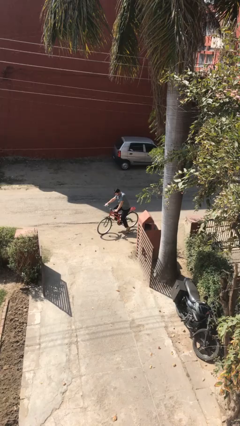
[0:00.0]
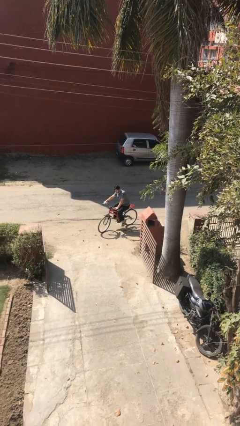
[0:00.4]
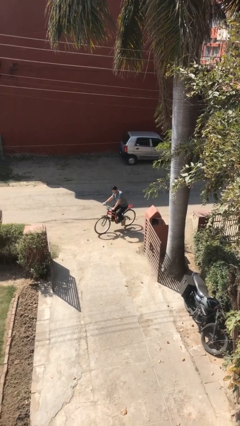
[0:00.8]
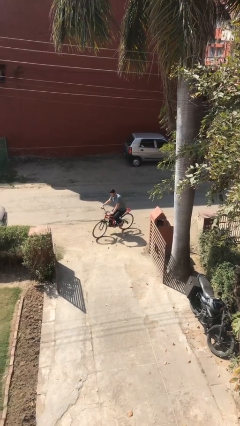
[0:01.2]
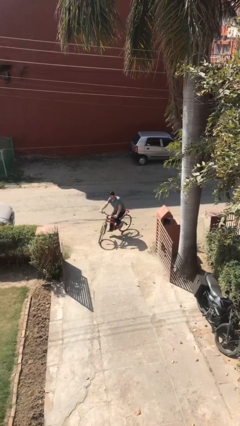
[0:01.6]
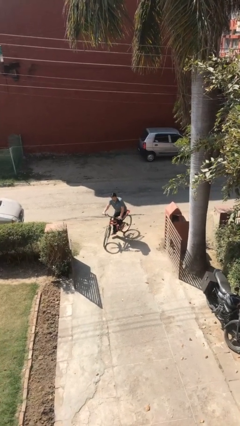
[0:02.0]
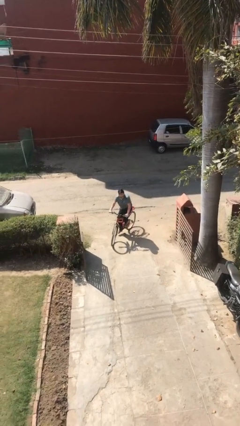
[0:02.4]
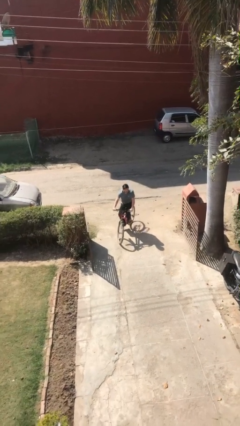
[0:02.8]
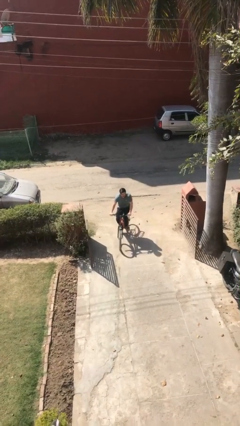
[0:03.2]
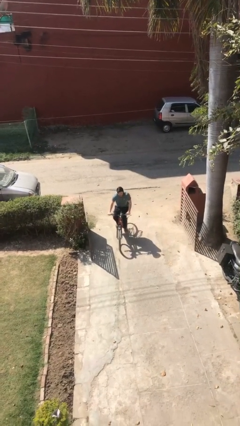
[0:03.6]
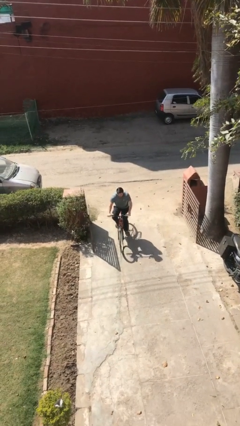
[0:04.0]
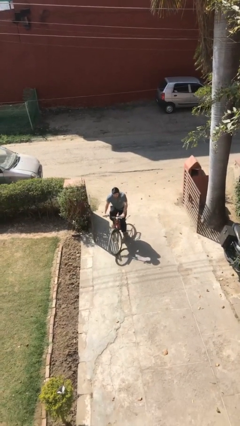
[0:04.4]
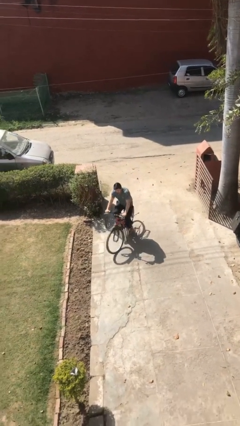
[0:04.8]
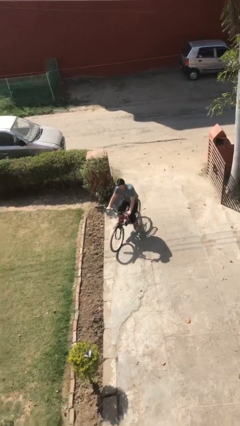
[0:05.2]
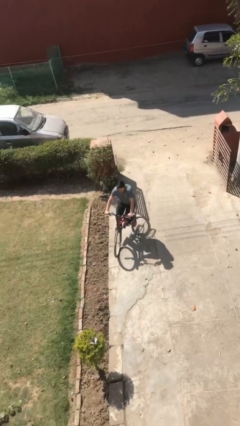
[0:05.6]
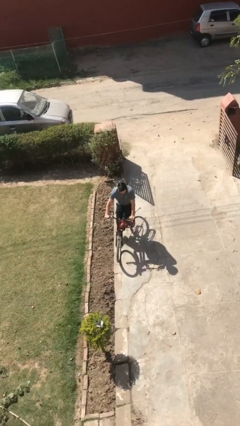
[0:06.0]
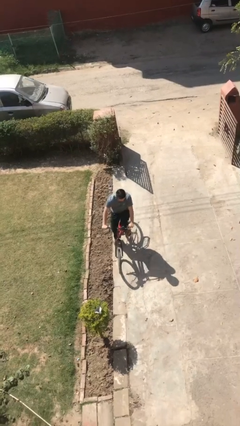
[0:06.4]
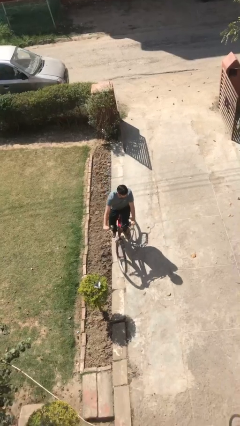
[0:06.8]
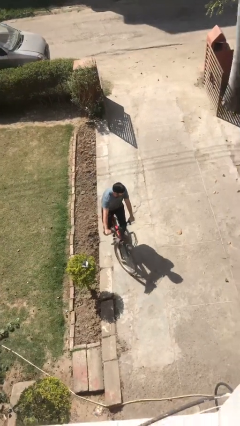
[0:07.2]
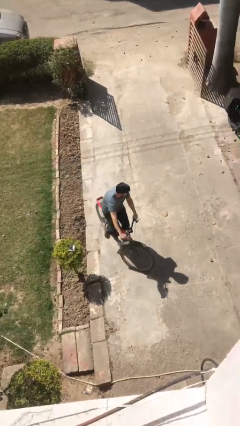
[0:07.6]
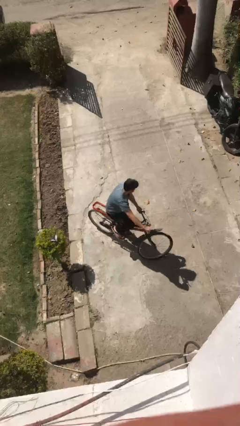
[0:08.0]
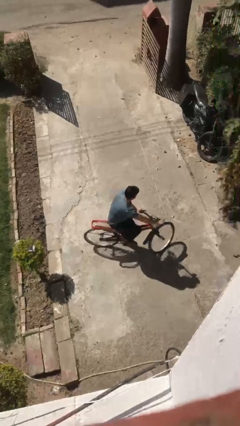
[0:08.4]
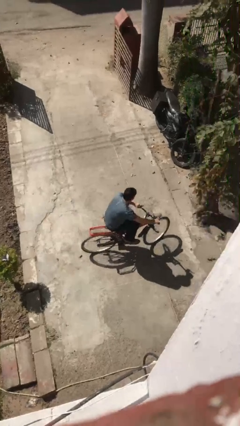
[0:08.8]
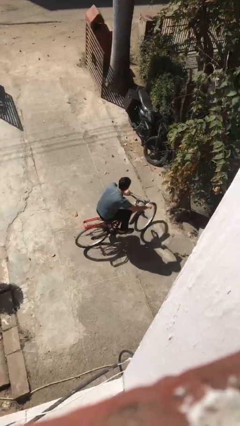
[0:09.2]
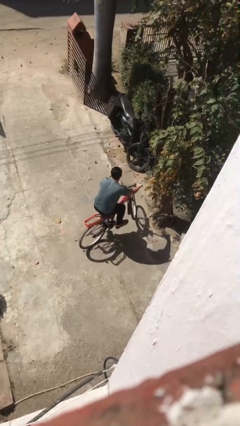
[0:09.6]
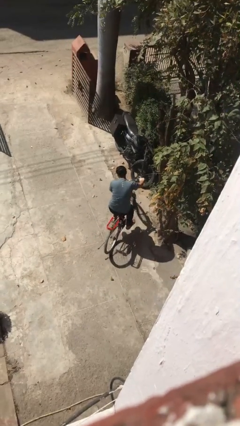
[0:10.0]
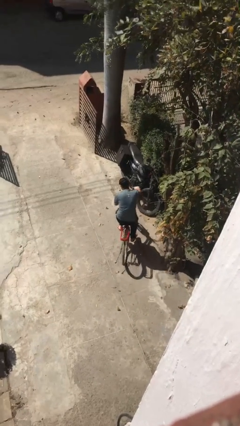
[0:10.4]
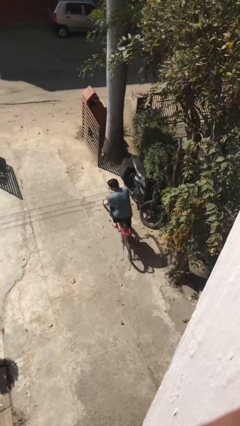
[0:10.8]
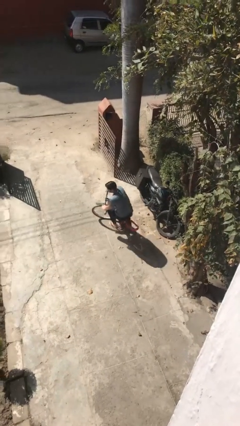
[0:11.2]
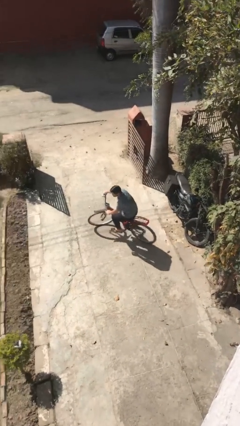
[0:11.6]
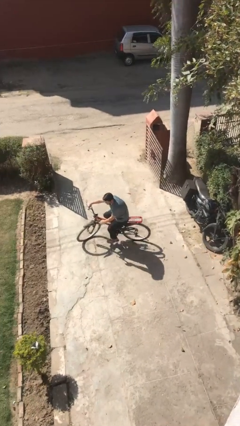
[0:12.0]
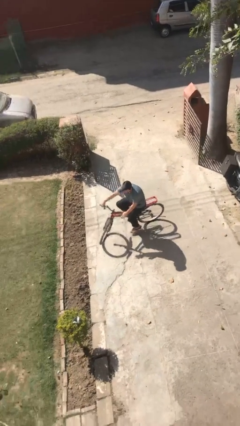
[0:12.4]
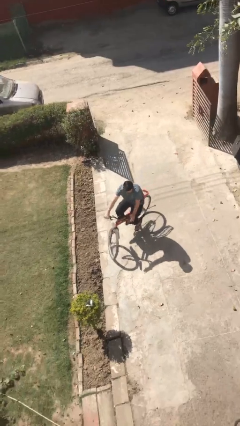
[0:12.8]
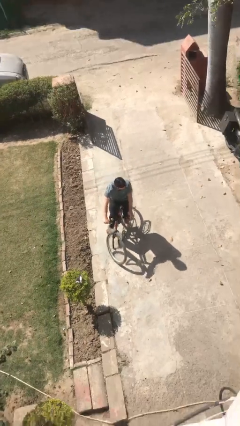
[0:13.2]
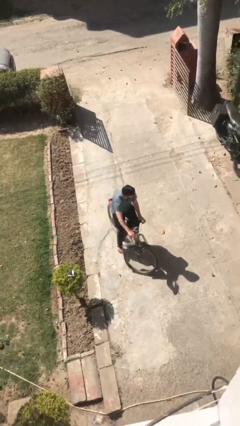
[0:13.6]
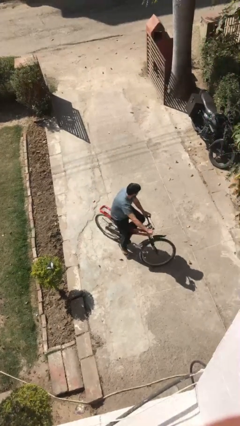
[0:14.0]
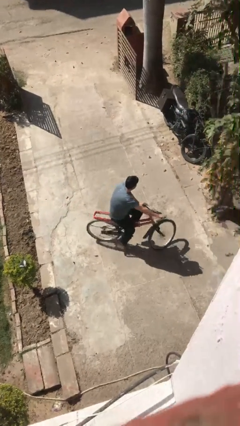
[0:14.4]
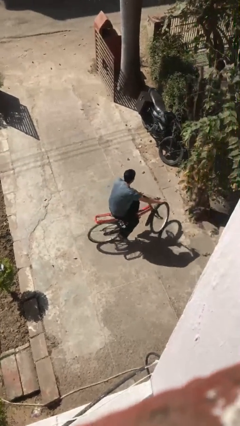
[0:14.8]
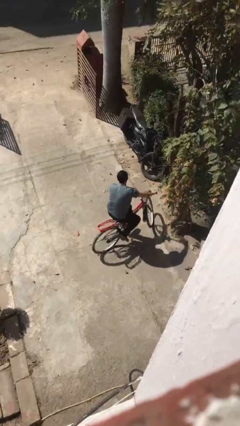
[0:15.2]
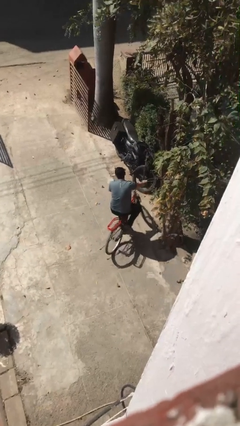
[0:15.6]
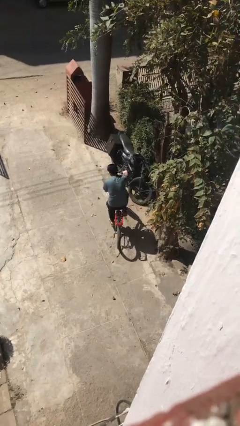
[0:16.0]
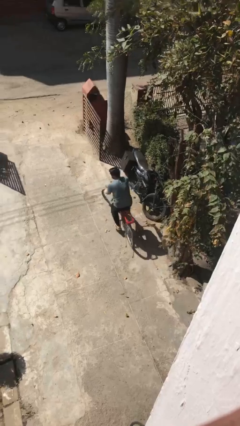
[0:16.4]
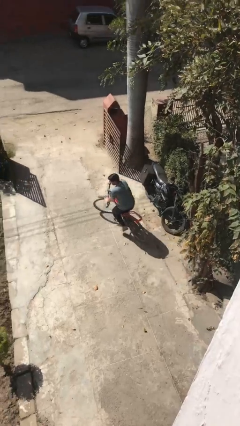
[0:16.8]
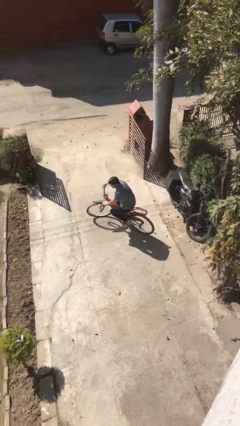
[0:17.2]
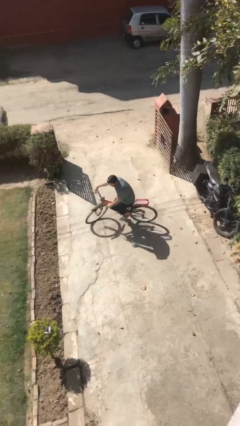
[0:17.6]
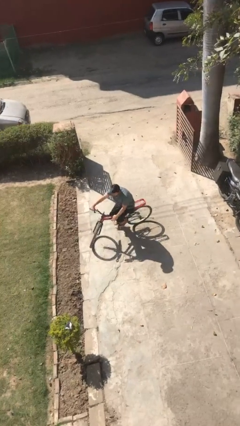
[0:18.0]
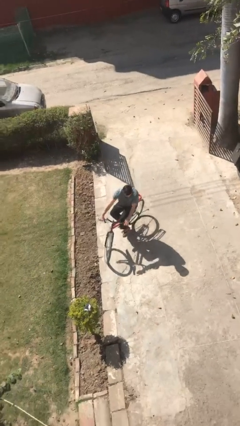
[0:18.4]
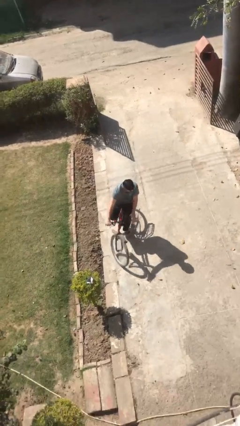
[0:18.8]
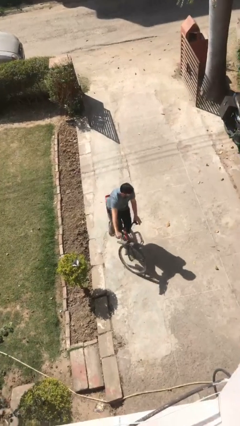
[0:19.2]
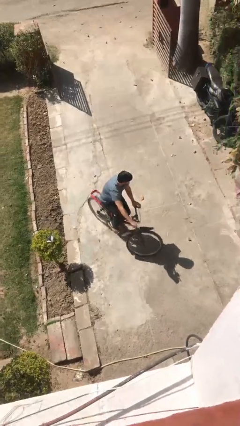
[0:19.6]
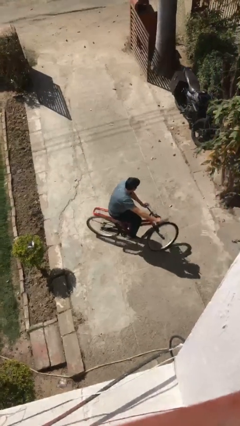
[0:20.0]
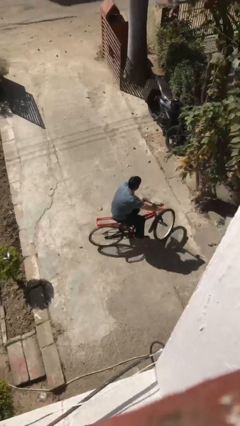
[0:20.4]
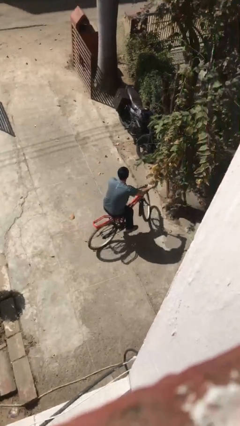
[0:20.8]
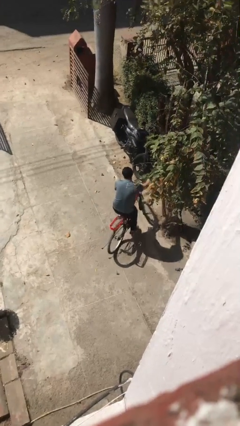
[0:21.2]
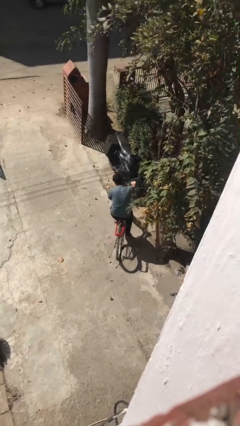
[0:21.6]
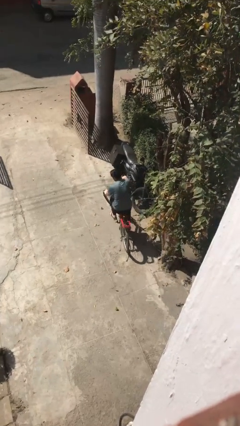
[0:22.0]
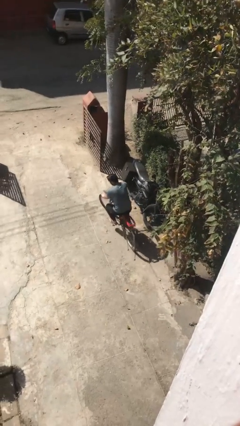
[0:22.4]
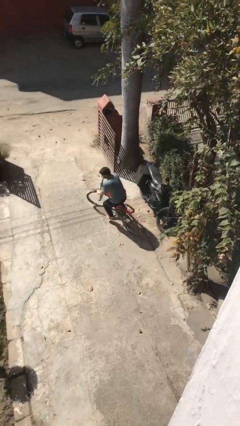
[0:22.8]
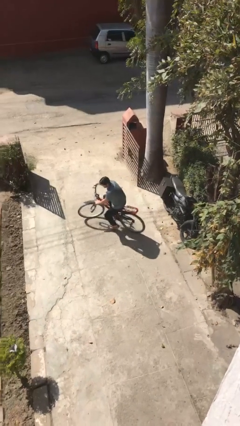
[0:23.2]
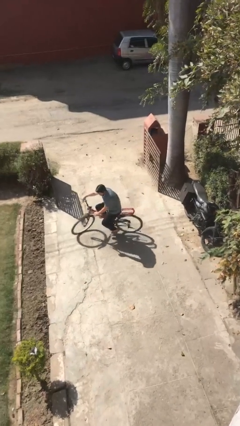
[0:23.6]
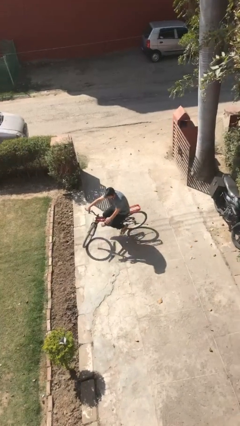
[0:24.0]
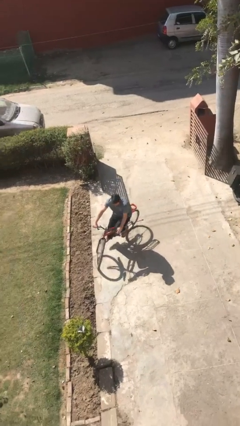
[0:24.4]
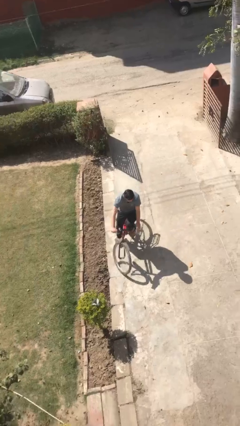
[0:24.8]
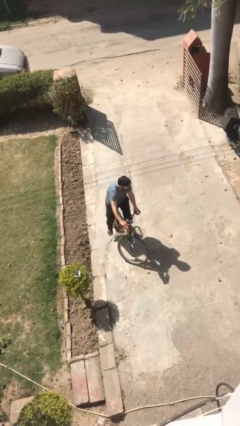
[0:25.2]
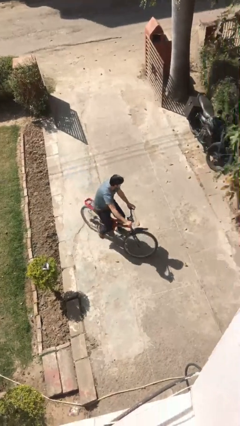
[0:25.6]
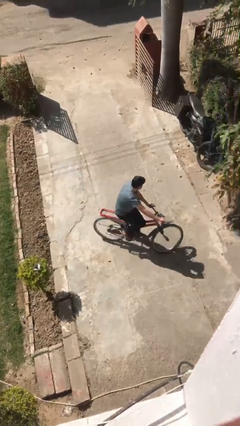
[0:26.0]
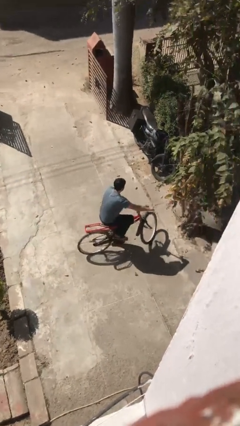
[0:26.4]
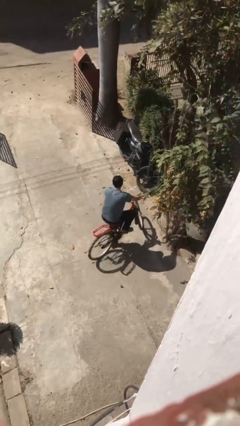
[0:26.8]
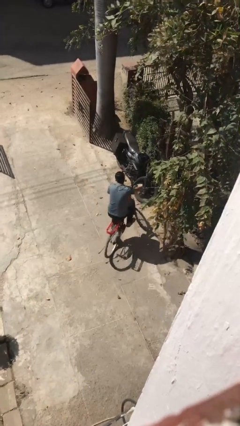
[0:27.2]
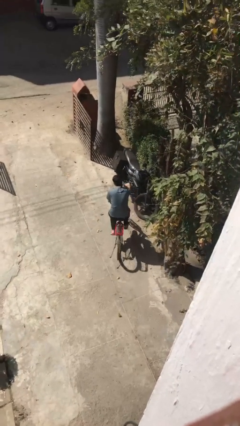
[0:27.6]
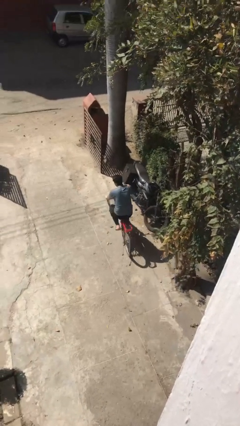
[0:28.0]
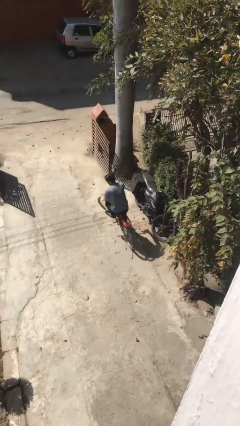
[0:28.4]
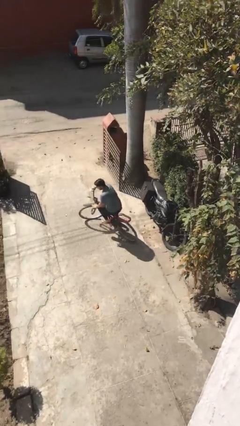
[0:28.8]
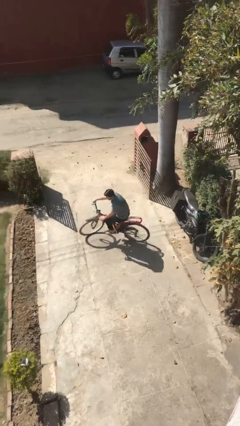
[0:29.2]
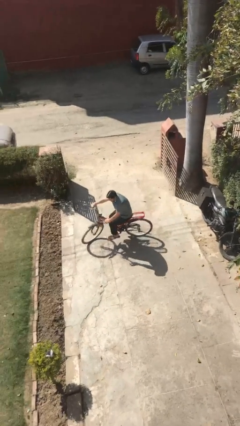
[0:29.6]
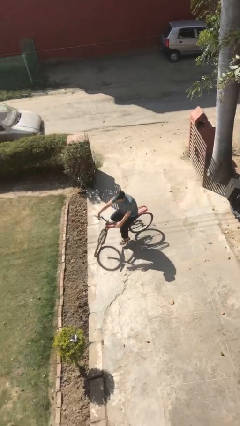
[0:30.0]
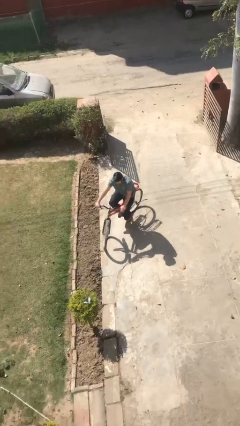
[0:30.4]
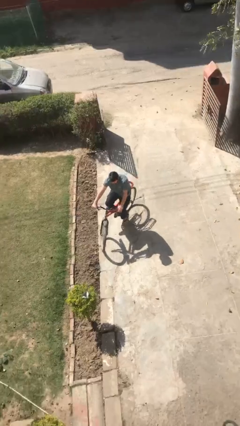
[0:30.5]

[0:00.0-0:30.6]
person rides bicycle

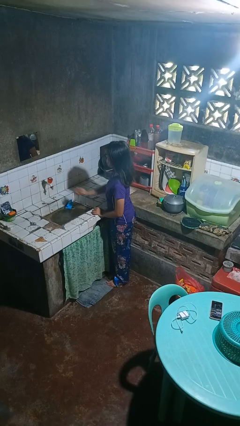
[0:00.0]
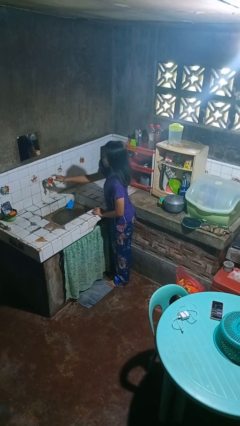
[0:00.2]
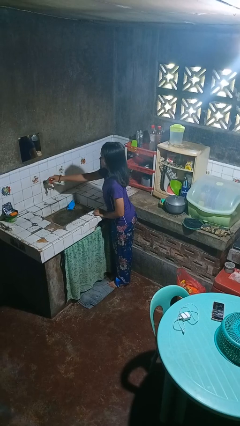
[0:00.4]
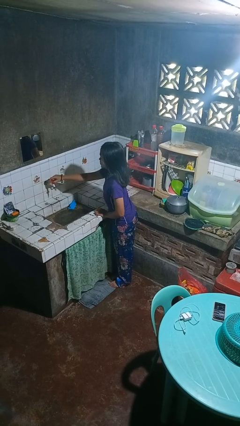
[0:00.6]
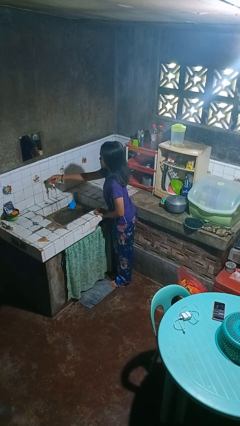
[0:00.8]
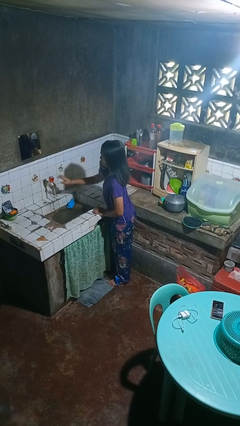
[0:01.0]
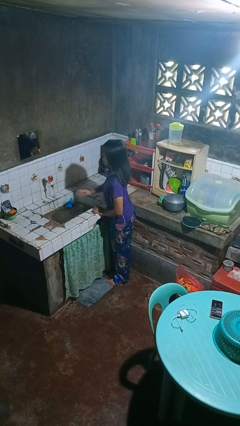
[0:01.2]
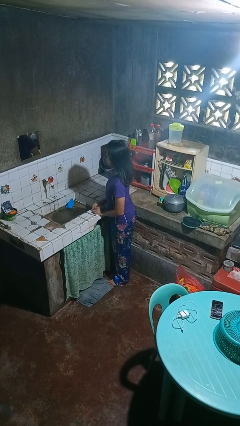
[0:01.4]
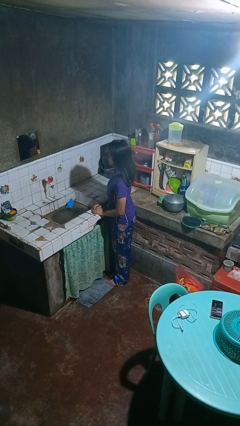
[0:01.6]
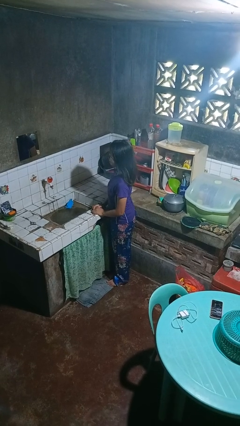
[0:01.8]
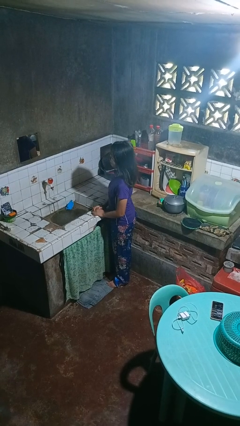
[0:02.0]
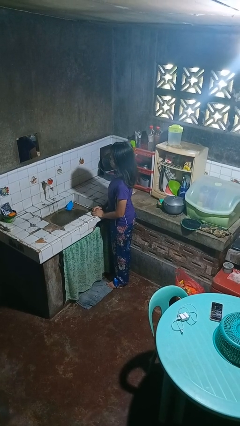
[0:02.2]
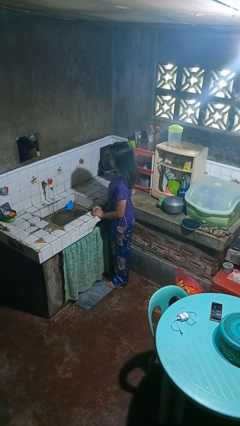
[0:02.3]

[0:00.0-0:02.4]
person turns on faucet

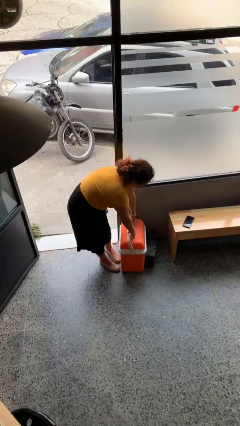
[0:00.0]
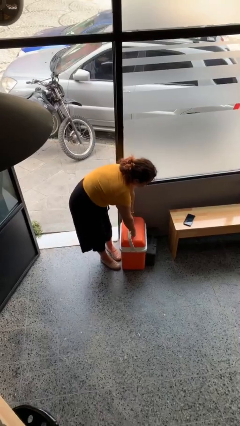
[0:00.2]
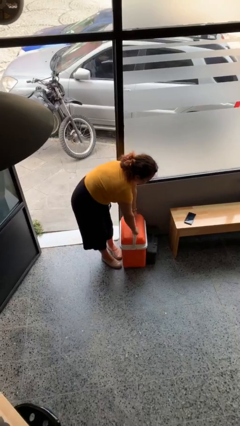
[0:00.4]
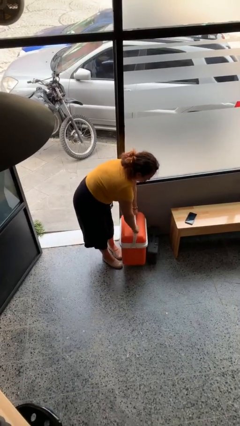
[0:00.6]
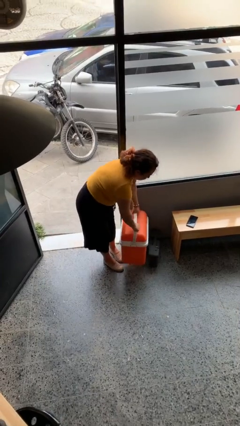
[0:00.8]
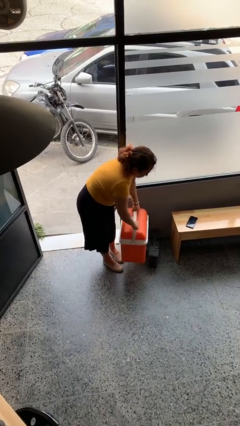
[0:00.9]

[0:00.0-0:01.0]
person picks up object from floor
